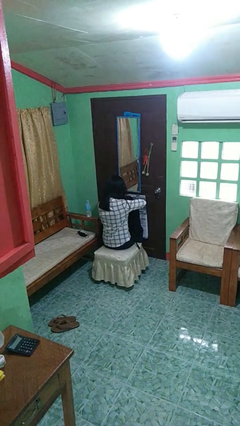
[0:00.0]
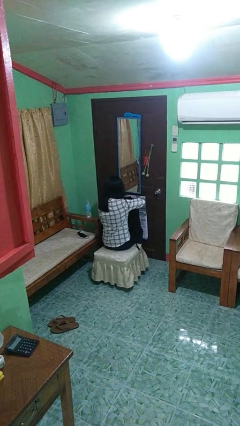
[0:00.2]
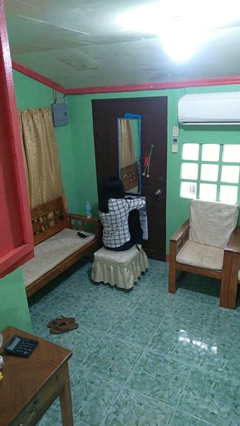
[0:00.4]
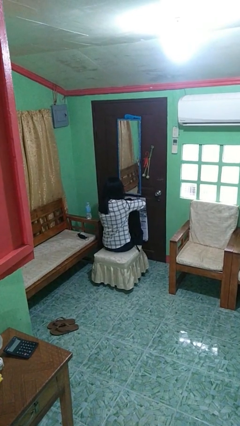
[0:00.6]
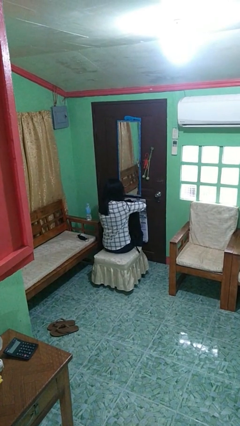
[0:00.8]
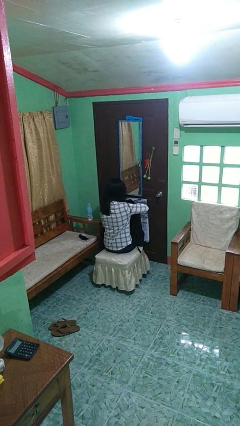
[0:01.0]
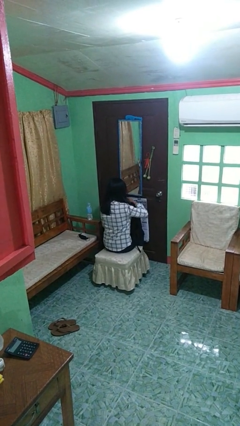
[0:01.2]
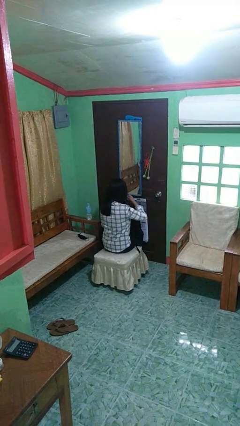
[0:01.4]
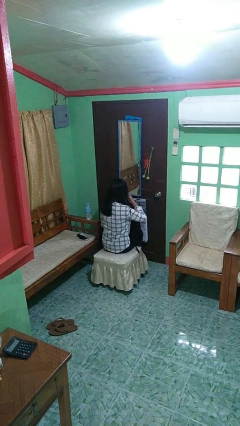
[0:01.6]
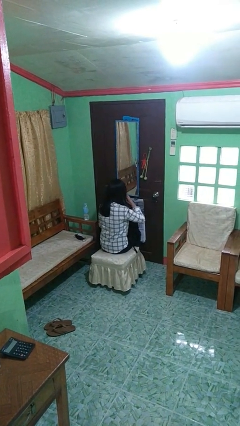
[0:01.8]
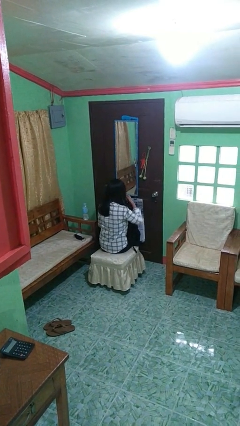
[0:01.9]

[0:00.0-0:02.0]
person eats snack from bag

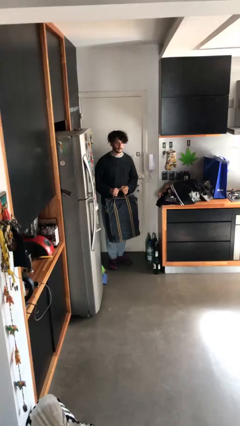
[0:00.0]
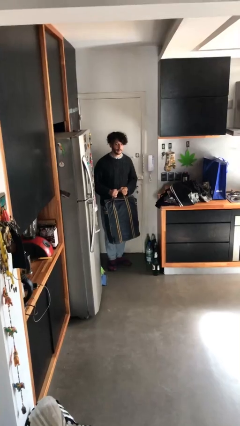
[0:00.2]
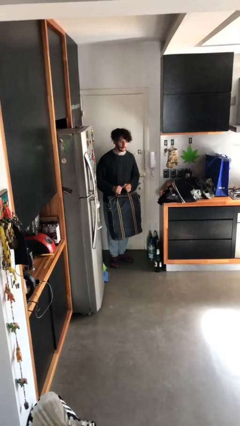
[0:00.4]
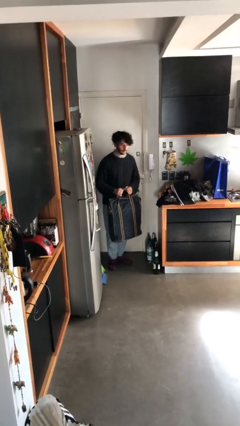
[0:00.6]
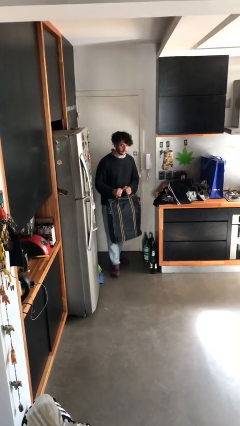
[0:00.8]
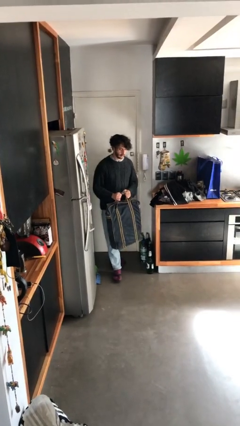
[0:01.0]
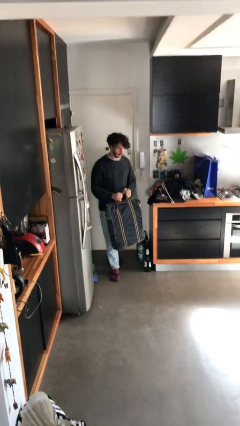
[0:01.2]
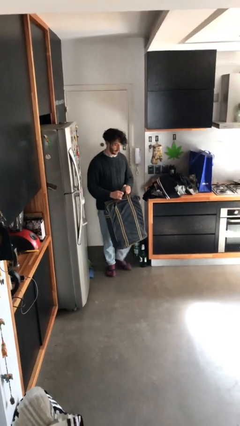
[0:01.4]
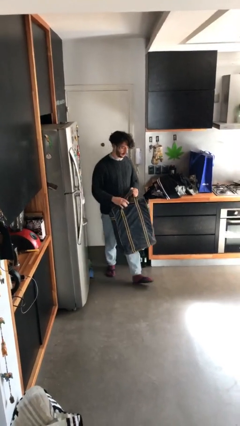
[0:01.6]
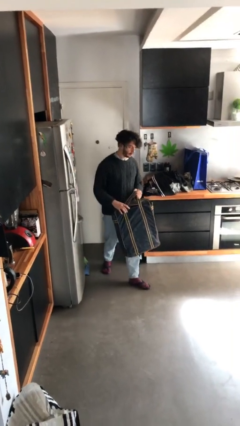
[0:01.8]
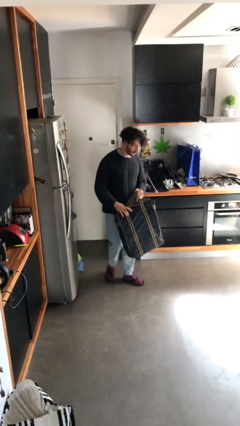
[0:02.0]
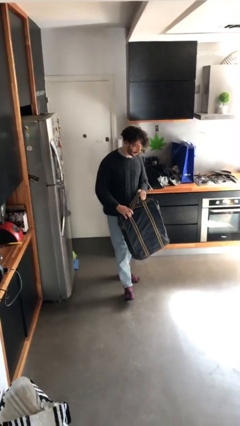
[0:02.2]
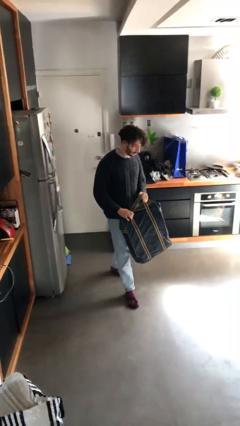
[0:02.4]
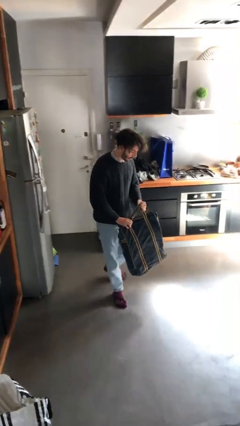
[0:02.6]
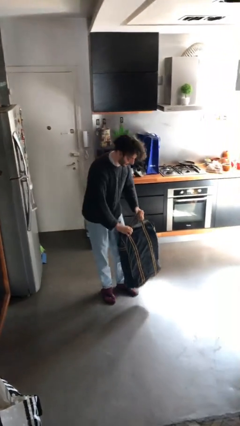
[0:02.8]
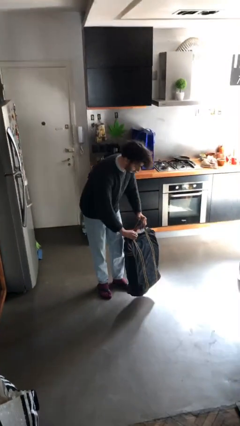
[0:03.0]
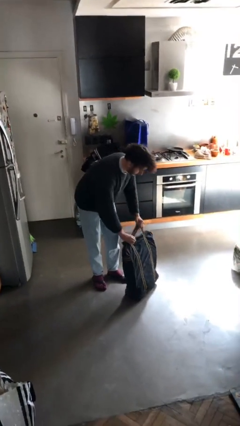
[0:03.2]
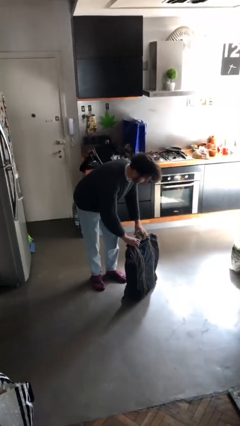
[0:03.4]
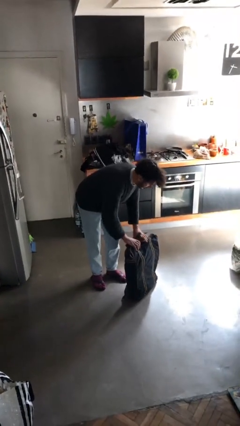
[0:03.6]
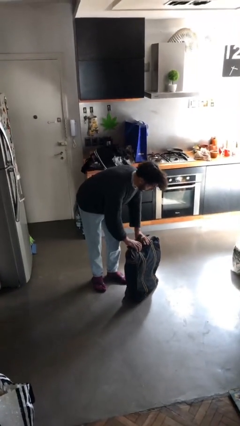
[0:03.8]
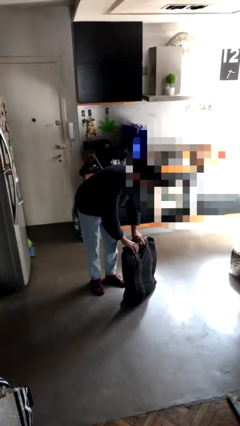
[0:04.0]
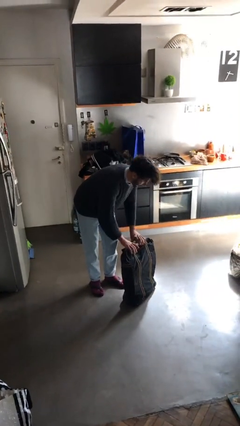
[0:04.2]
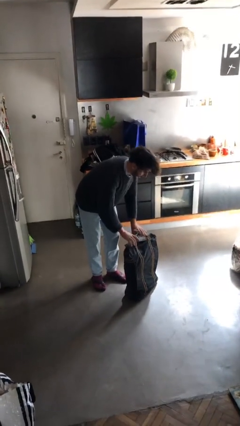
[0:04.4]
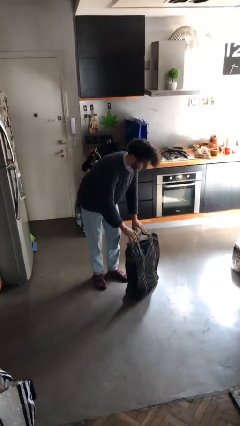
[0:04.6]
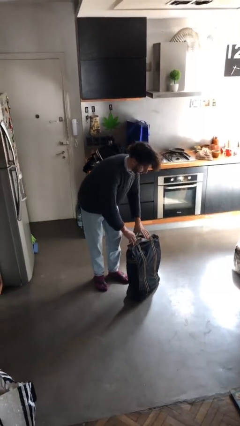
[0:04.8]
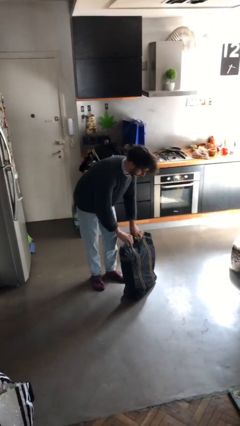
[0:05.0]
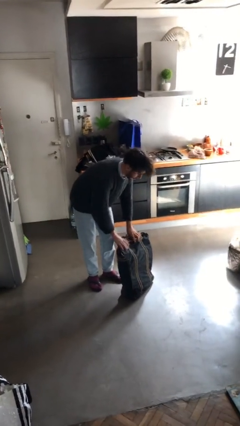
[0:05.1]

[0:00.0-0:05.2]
person puts down object on floor

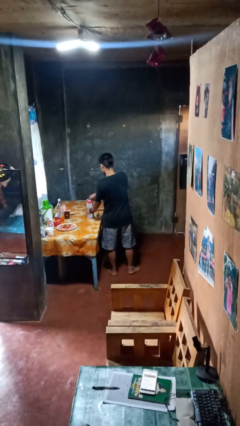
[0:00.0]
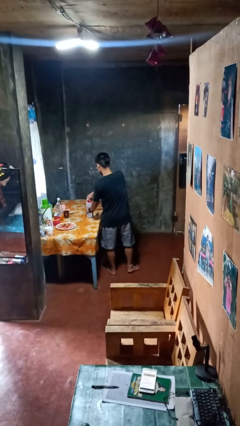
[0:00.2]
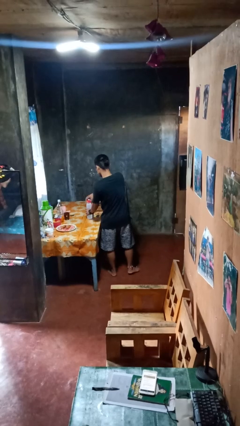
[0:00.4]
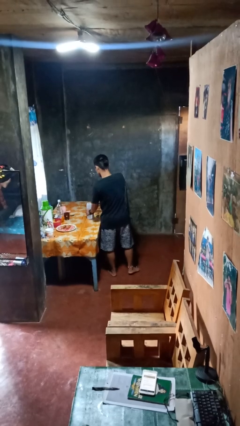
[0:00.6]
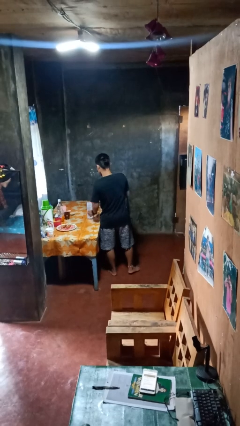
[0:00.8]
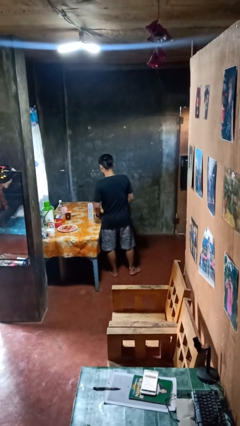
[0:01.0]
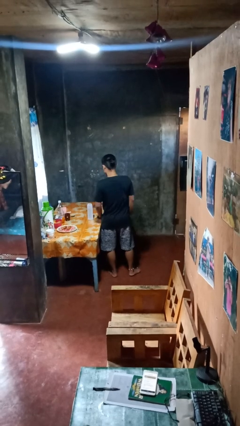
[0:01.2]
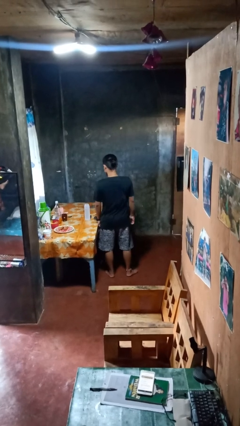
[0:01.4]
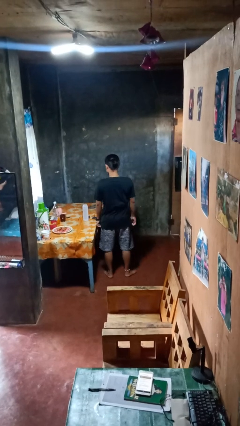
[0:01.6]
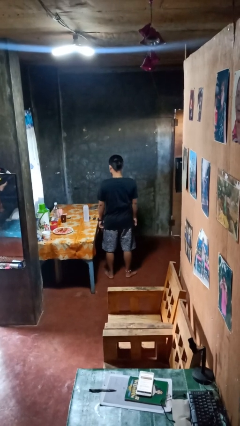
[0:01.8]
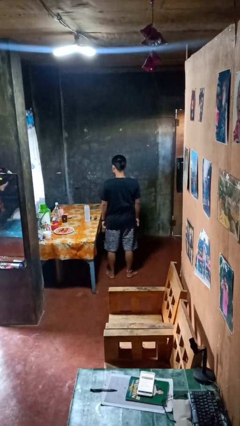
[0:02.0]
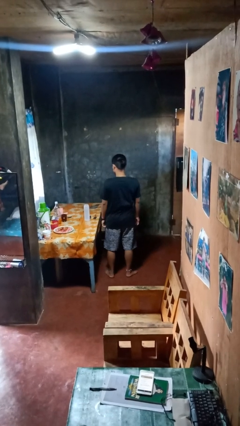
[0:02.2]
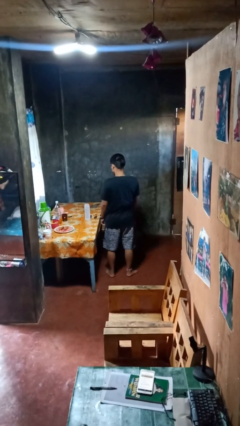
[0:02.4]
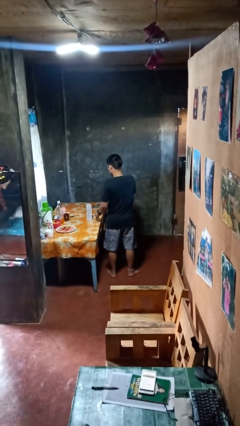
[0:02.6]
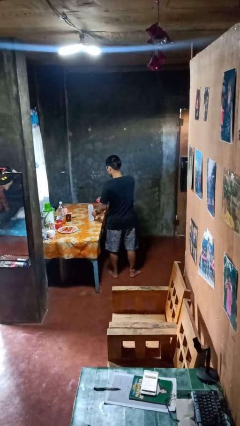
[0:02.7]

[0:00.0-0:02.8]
person opens jar

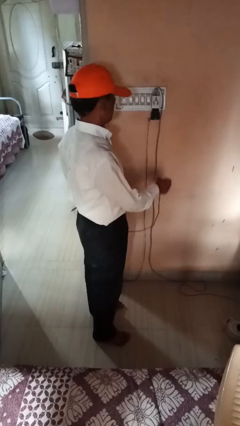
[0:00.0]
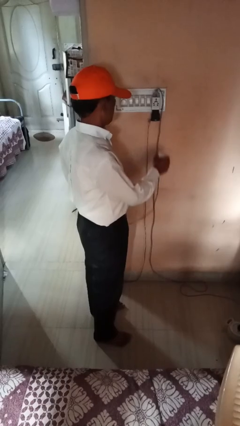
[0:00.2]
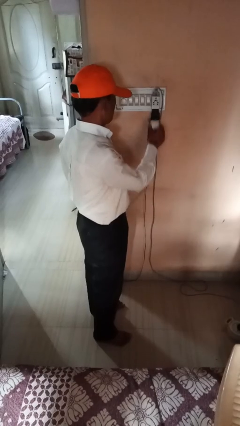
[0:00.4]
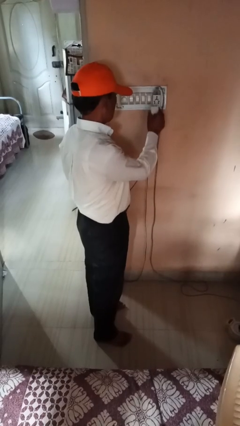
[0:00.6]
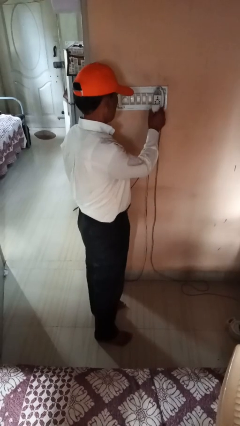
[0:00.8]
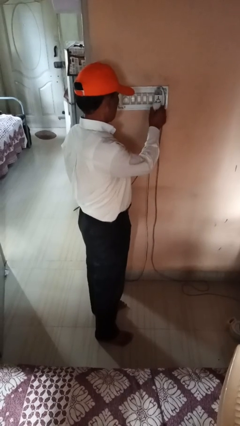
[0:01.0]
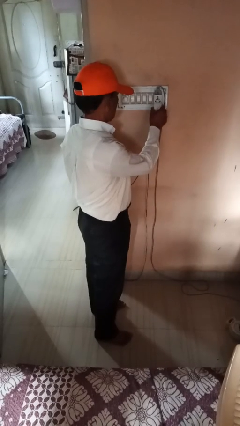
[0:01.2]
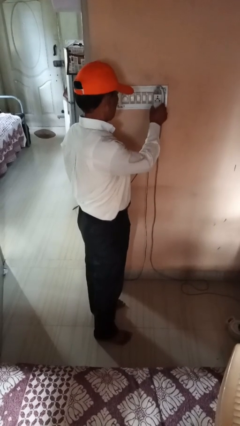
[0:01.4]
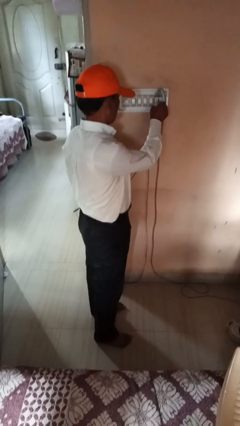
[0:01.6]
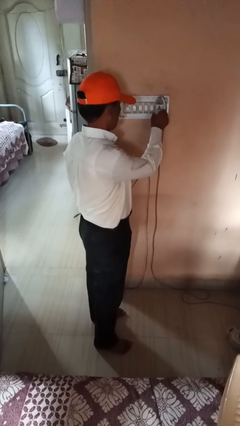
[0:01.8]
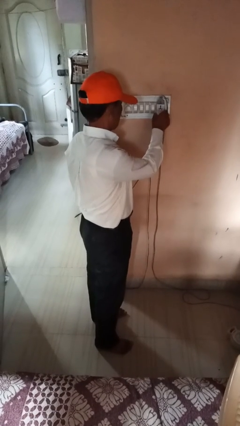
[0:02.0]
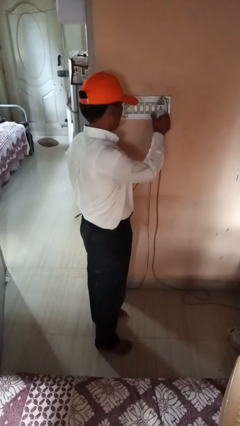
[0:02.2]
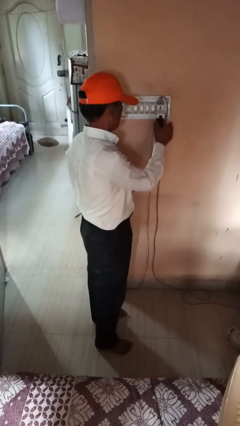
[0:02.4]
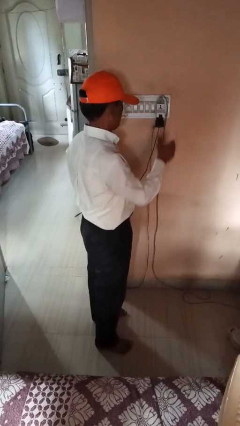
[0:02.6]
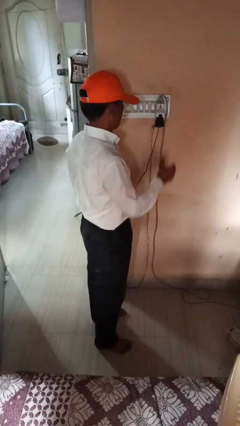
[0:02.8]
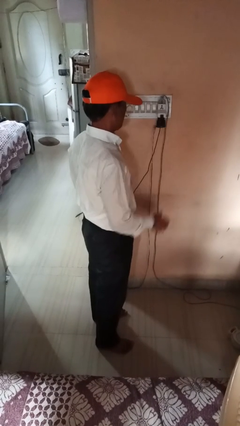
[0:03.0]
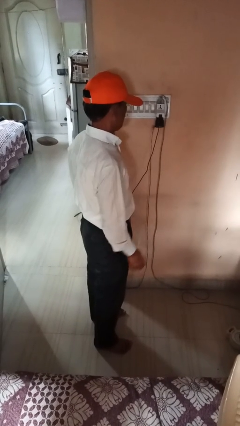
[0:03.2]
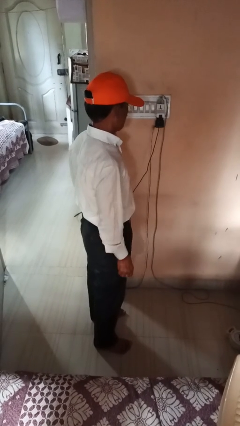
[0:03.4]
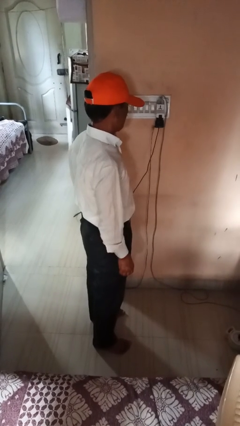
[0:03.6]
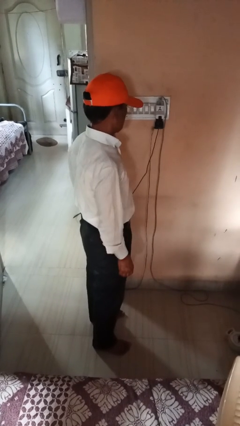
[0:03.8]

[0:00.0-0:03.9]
person plugs into electrical socket

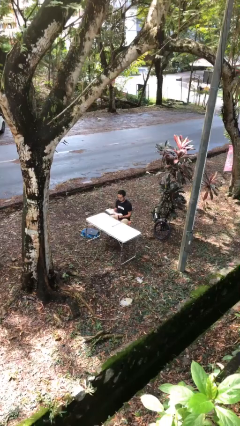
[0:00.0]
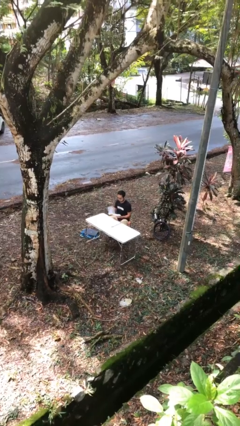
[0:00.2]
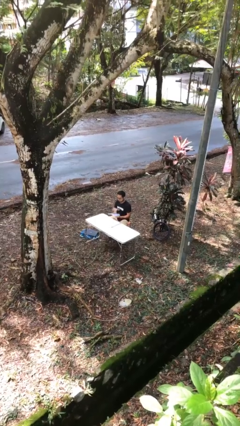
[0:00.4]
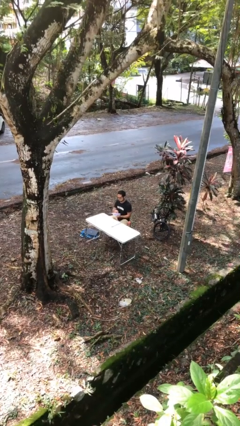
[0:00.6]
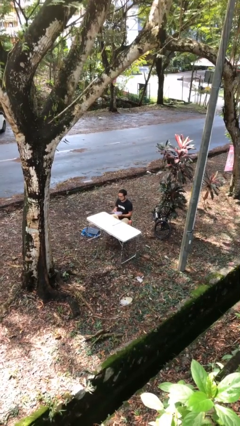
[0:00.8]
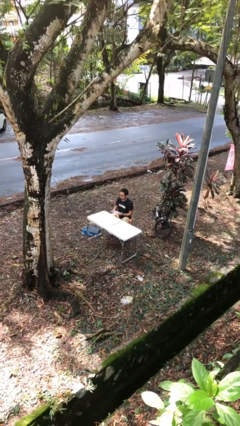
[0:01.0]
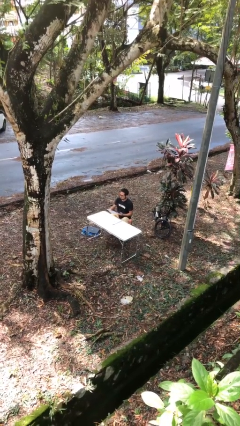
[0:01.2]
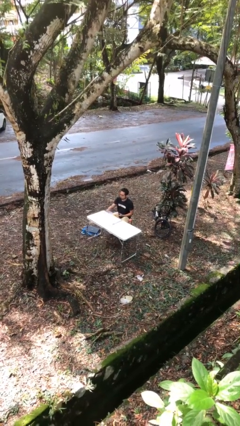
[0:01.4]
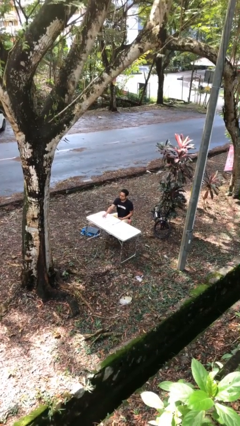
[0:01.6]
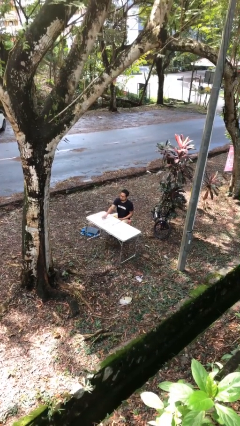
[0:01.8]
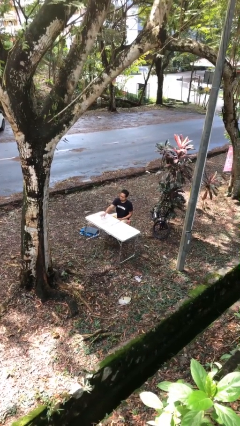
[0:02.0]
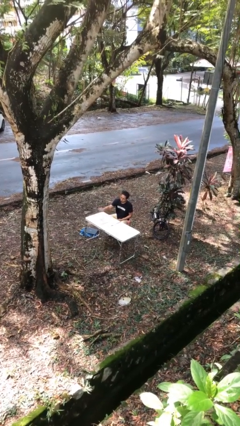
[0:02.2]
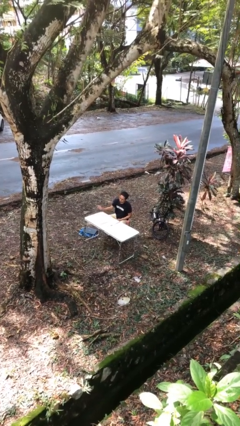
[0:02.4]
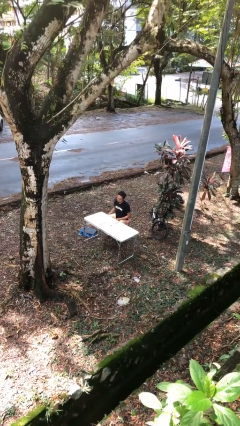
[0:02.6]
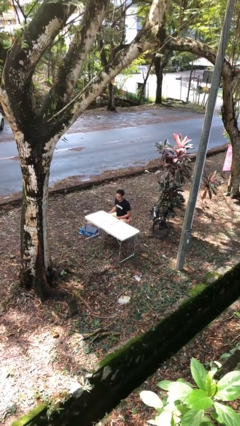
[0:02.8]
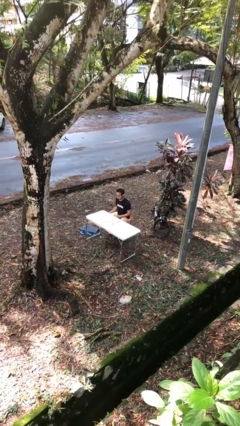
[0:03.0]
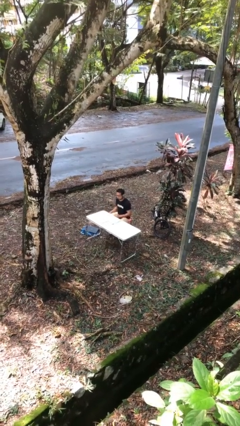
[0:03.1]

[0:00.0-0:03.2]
person puts down object on table

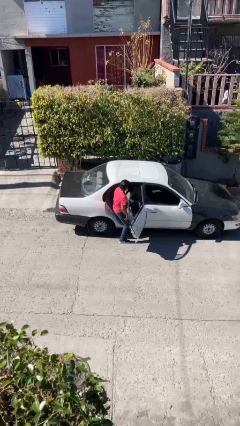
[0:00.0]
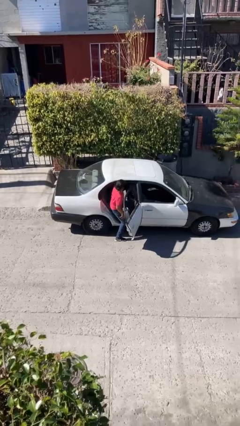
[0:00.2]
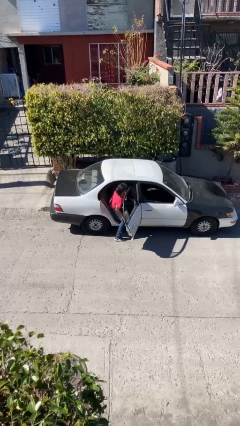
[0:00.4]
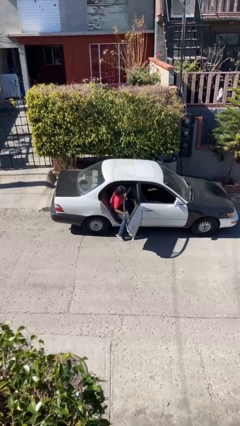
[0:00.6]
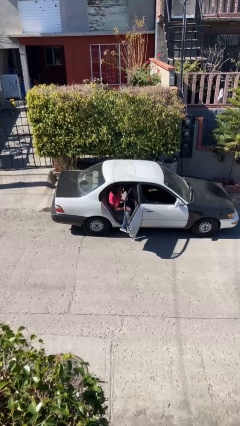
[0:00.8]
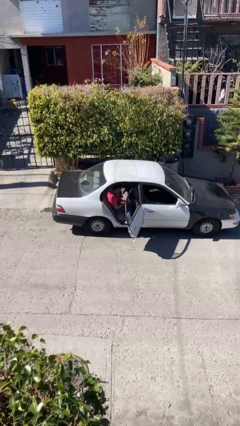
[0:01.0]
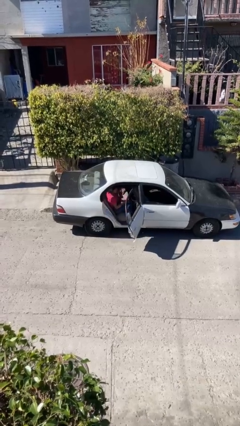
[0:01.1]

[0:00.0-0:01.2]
person enters car
